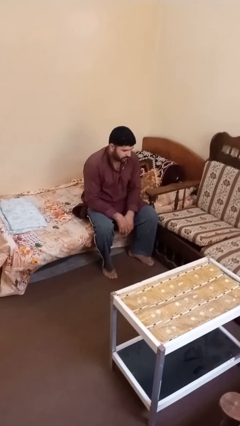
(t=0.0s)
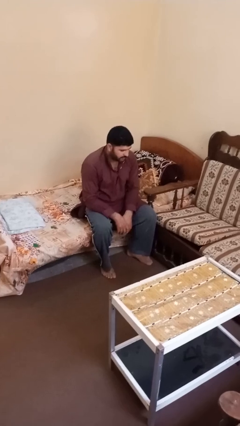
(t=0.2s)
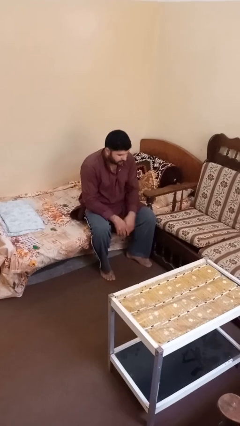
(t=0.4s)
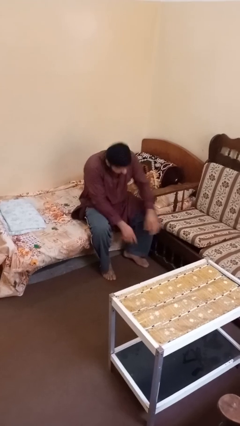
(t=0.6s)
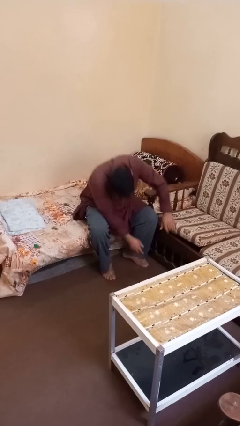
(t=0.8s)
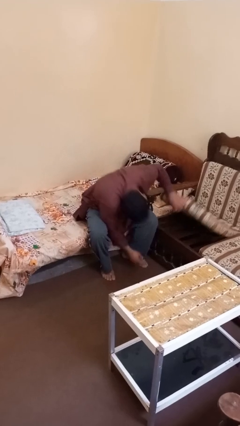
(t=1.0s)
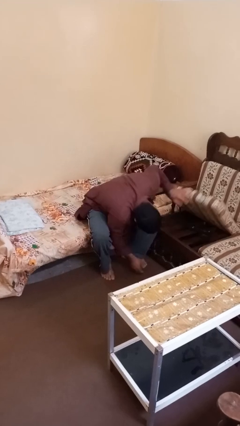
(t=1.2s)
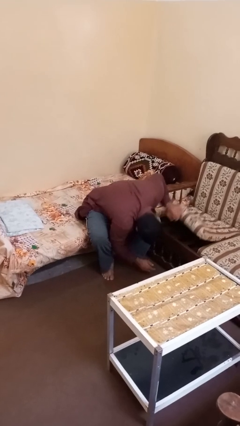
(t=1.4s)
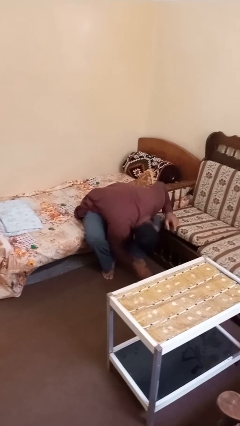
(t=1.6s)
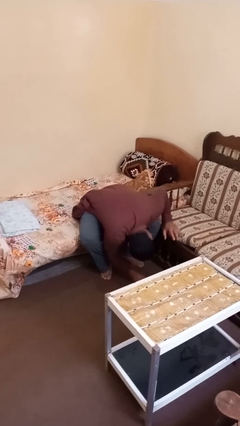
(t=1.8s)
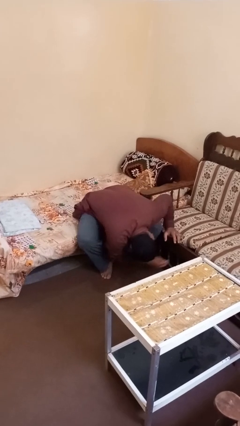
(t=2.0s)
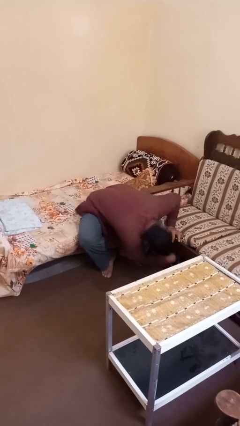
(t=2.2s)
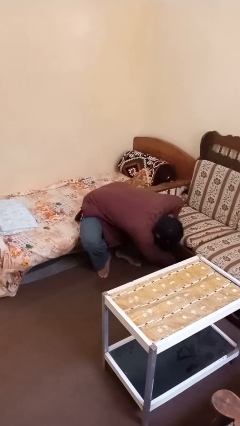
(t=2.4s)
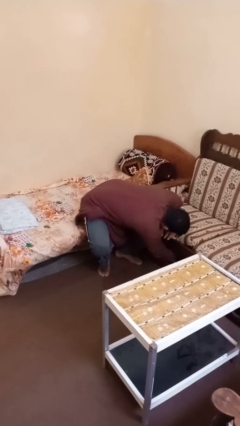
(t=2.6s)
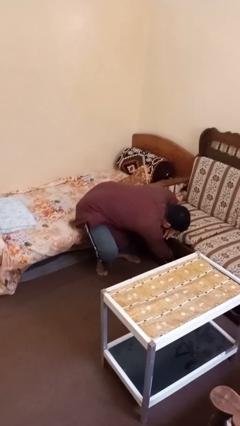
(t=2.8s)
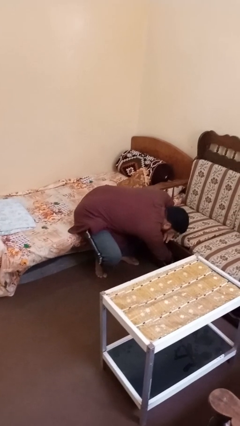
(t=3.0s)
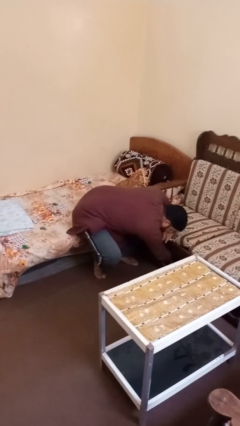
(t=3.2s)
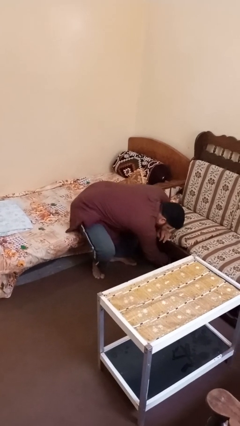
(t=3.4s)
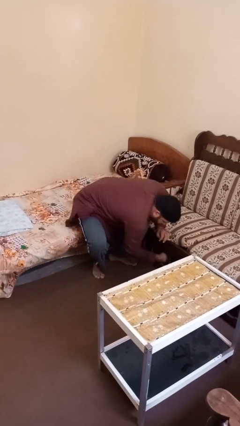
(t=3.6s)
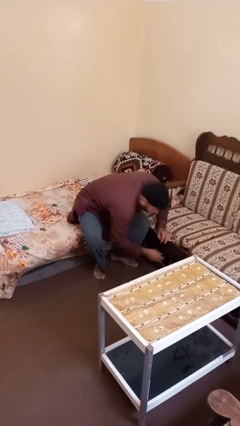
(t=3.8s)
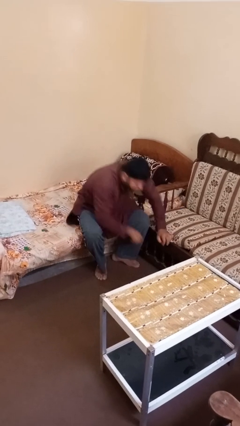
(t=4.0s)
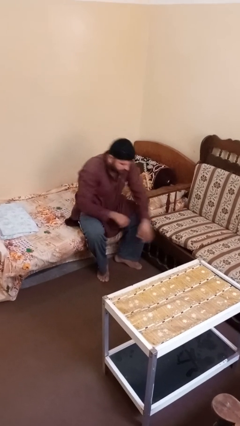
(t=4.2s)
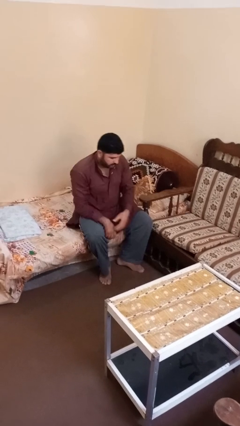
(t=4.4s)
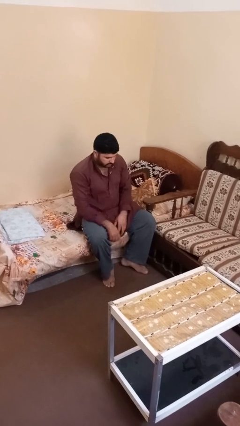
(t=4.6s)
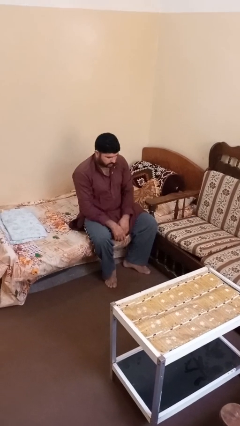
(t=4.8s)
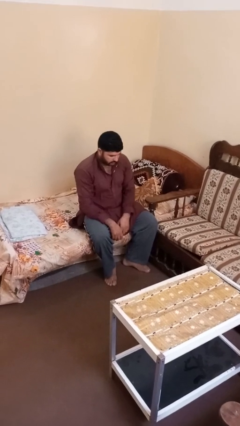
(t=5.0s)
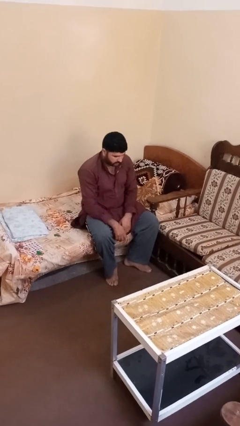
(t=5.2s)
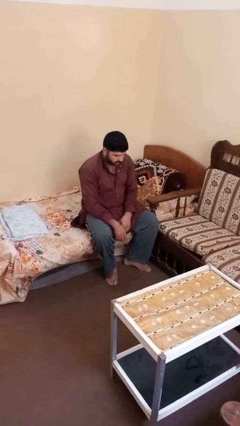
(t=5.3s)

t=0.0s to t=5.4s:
person searches under couch

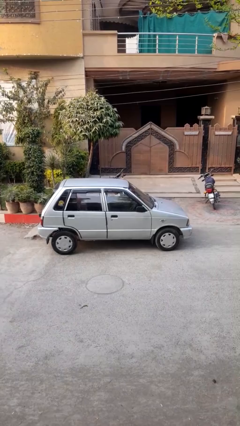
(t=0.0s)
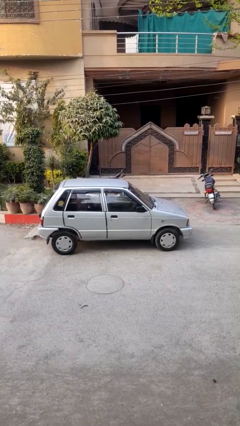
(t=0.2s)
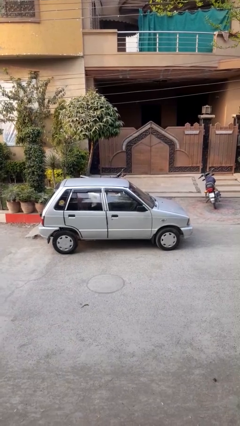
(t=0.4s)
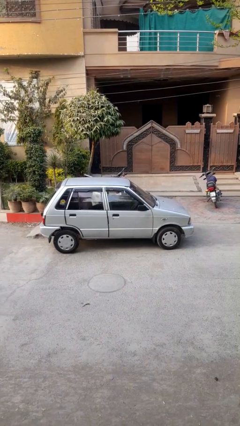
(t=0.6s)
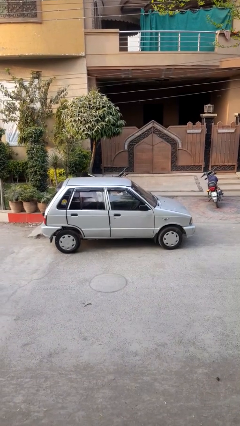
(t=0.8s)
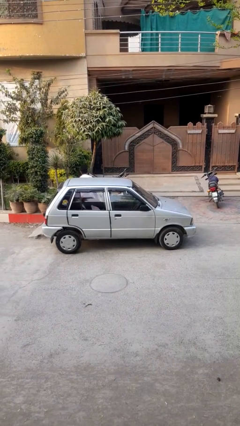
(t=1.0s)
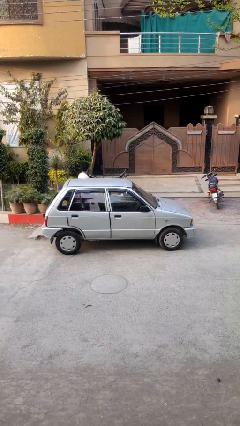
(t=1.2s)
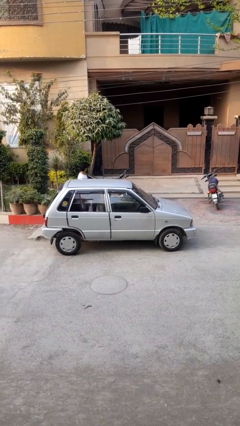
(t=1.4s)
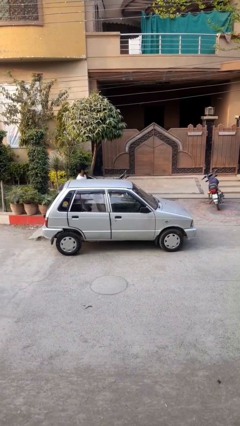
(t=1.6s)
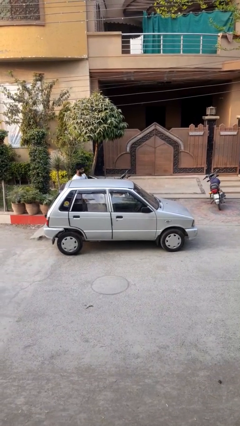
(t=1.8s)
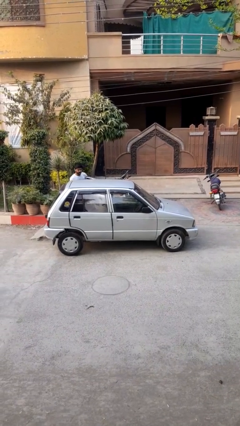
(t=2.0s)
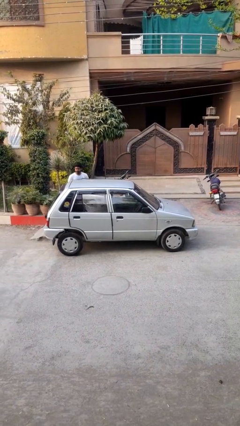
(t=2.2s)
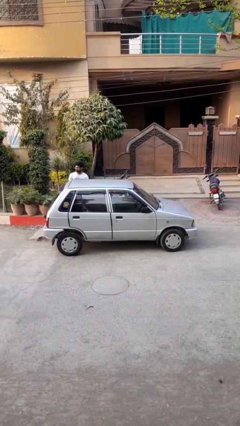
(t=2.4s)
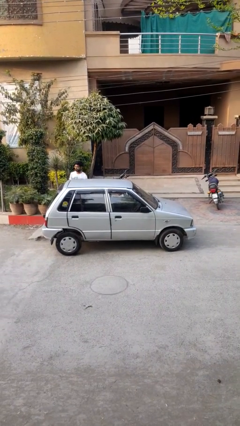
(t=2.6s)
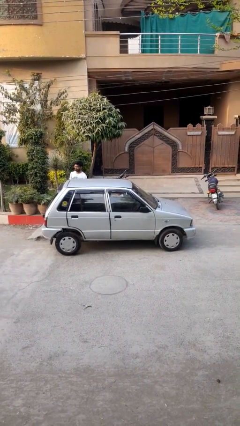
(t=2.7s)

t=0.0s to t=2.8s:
car drops off person

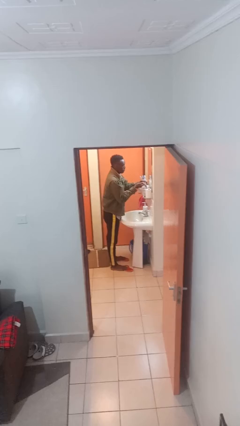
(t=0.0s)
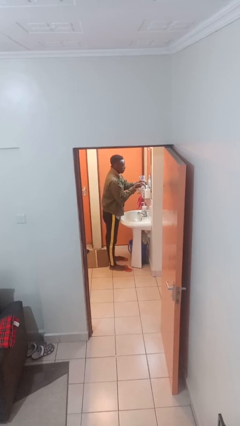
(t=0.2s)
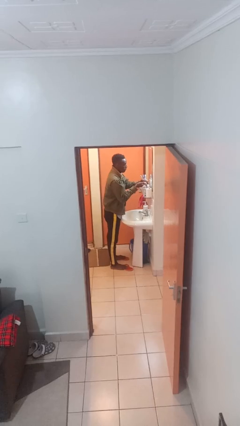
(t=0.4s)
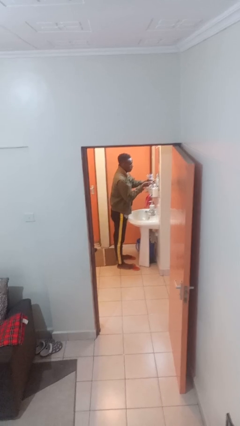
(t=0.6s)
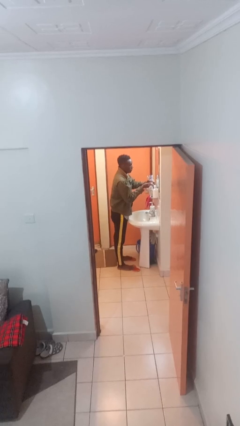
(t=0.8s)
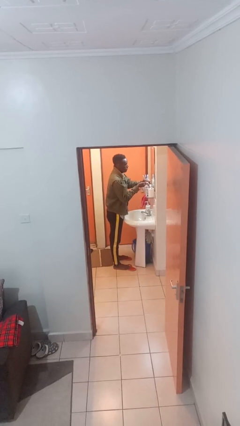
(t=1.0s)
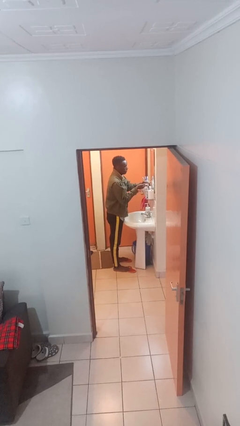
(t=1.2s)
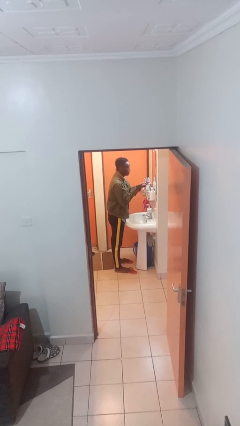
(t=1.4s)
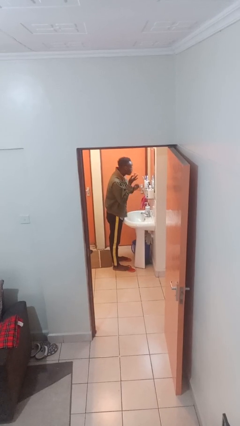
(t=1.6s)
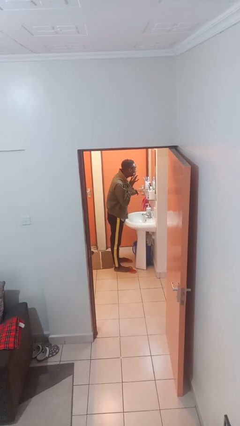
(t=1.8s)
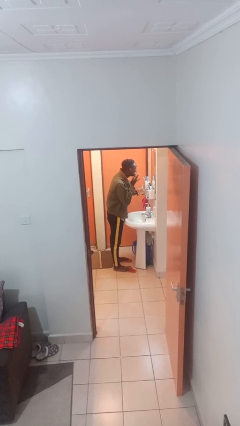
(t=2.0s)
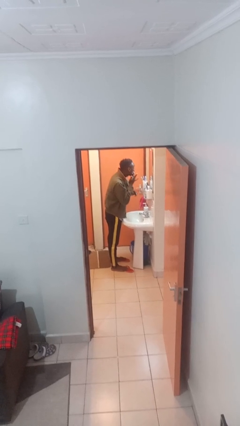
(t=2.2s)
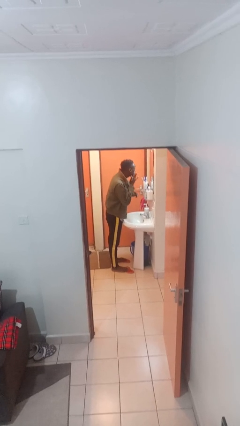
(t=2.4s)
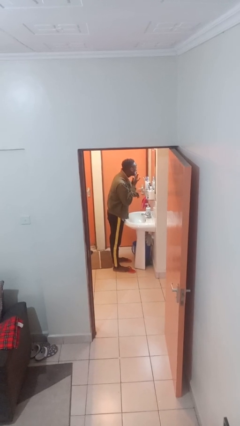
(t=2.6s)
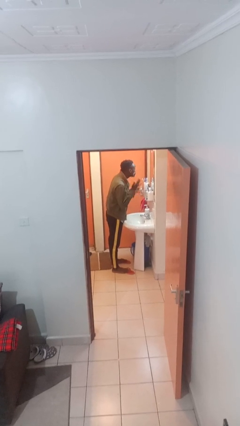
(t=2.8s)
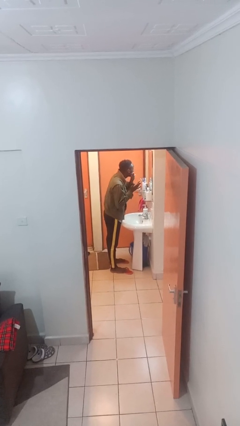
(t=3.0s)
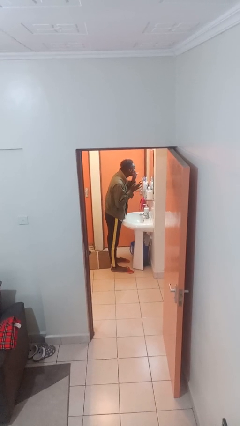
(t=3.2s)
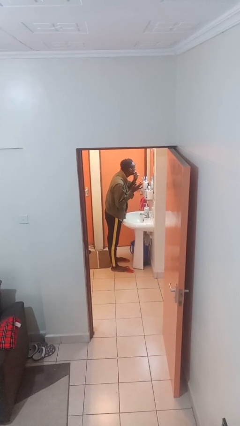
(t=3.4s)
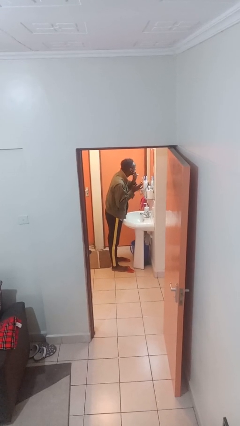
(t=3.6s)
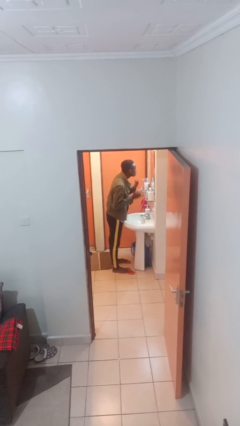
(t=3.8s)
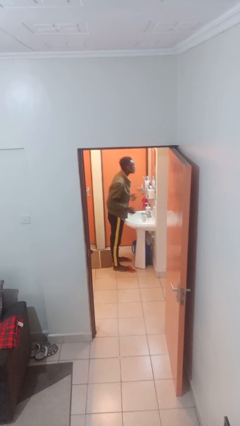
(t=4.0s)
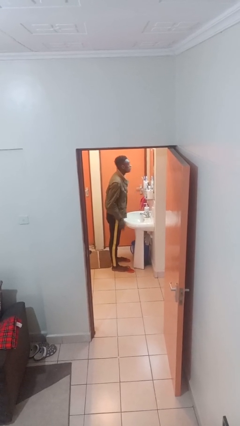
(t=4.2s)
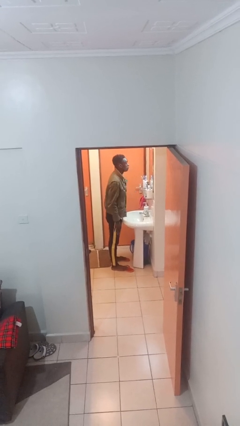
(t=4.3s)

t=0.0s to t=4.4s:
person applies shaving cream

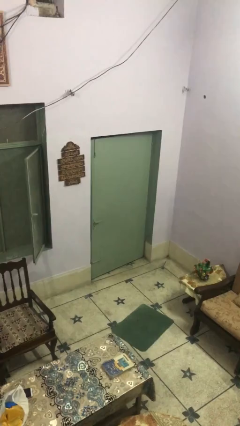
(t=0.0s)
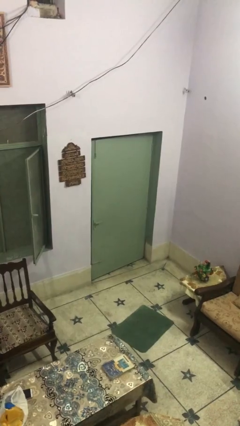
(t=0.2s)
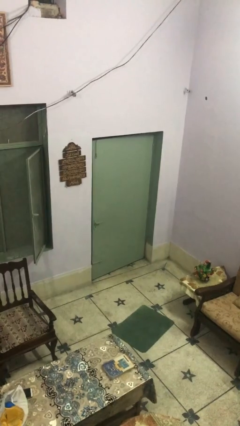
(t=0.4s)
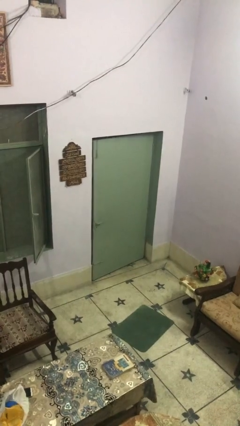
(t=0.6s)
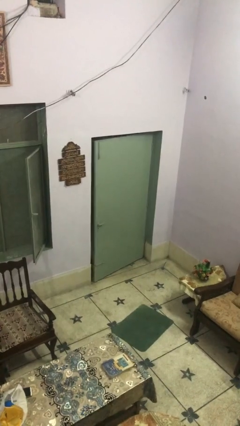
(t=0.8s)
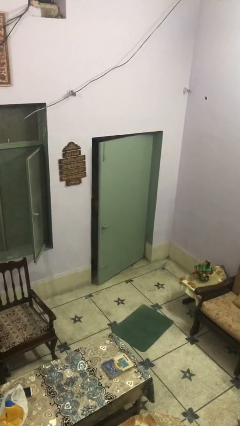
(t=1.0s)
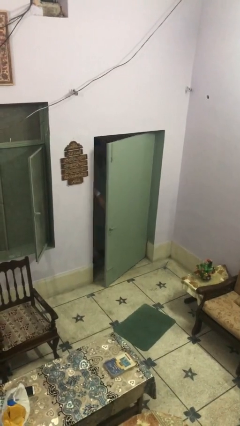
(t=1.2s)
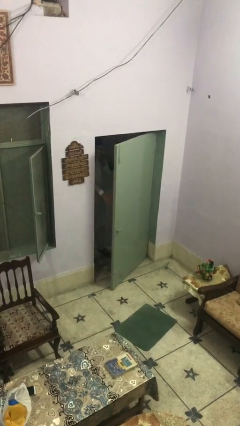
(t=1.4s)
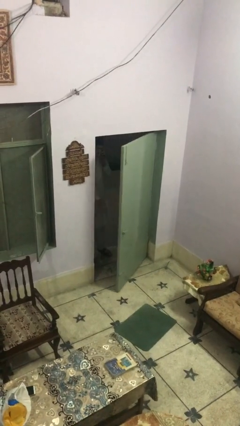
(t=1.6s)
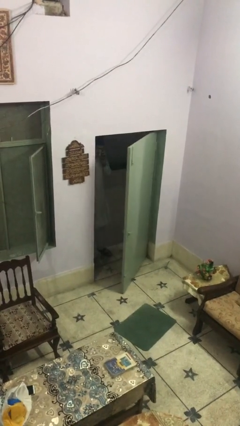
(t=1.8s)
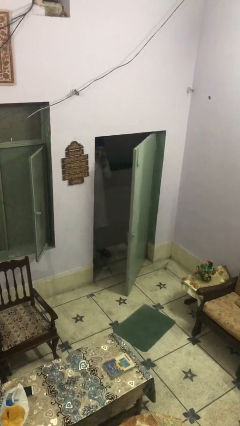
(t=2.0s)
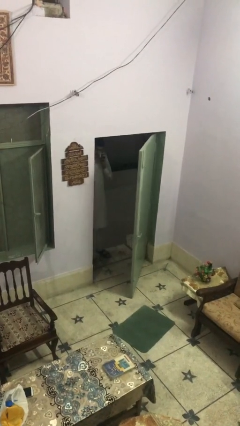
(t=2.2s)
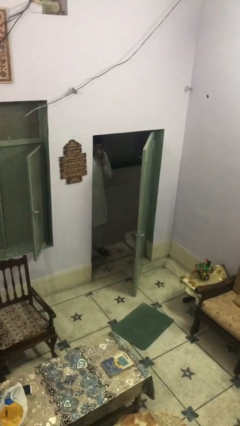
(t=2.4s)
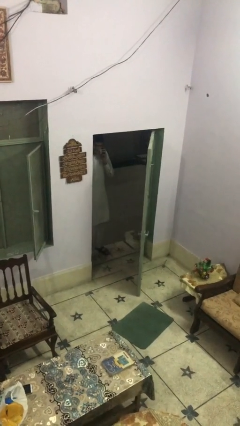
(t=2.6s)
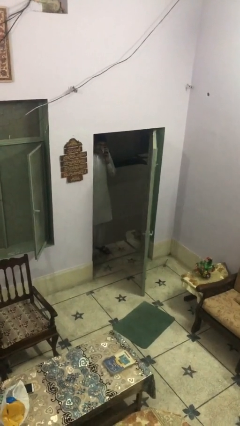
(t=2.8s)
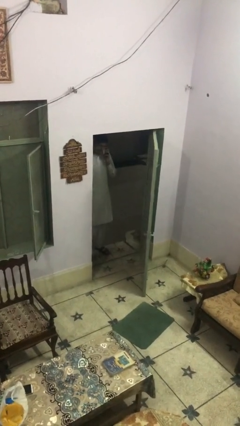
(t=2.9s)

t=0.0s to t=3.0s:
person opens facility door

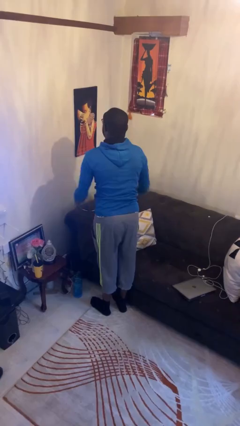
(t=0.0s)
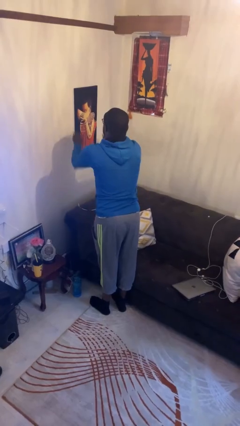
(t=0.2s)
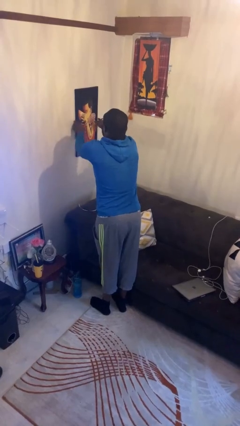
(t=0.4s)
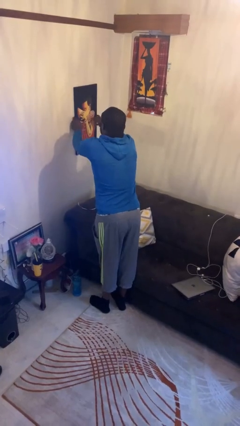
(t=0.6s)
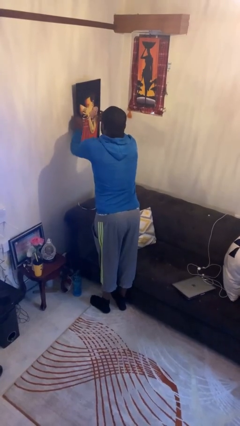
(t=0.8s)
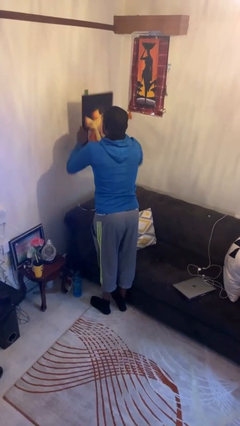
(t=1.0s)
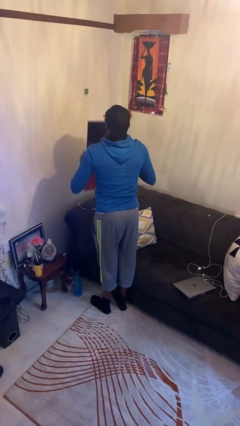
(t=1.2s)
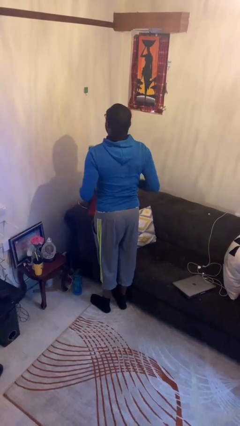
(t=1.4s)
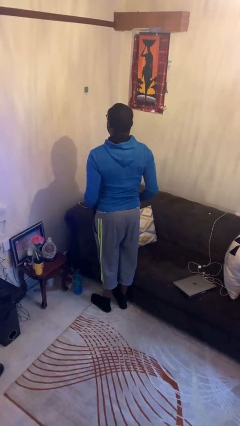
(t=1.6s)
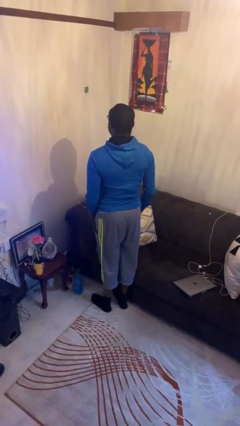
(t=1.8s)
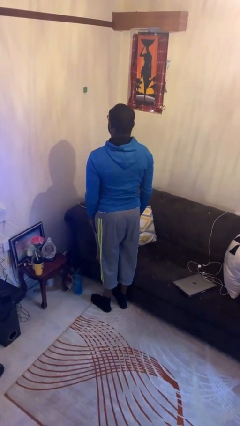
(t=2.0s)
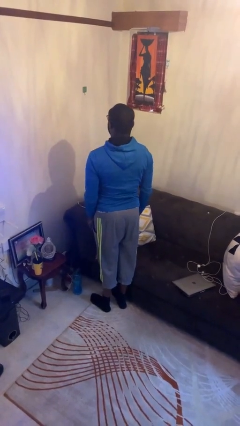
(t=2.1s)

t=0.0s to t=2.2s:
person takes down picture frame
